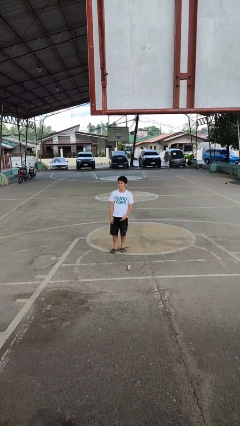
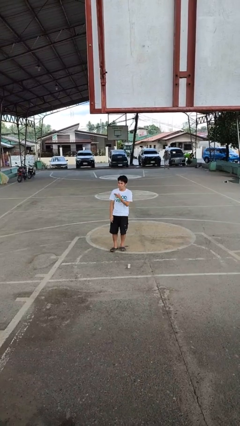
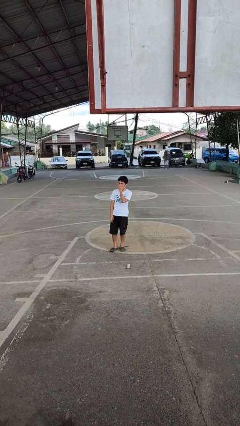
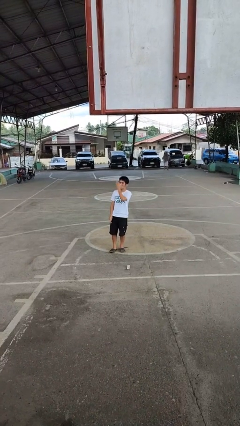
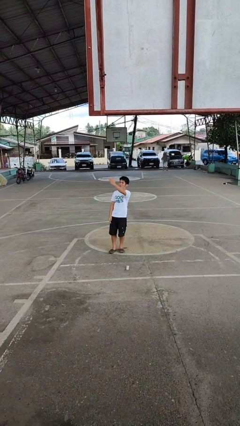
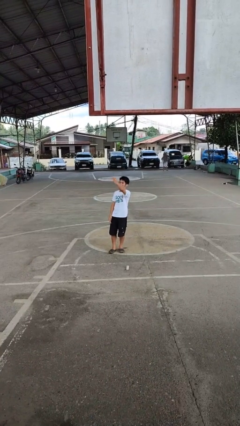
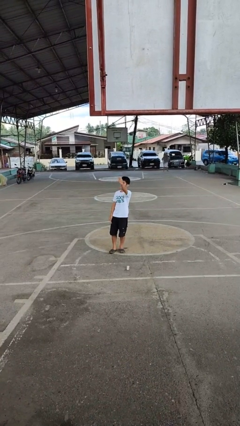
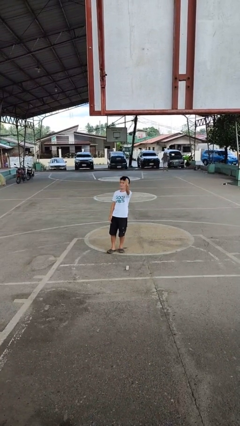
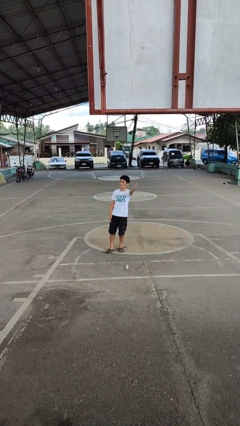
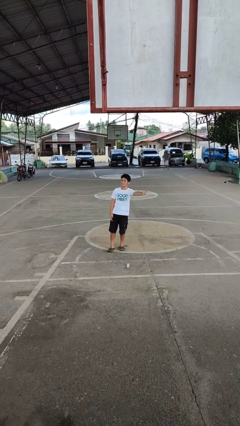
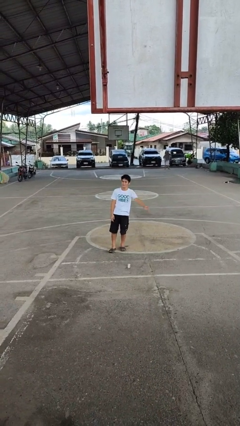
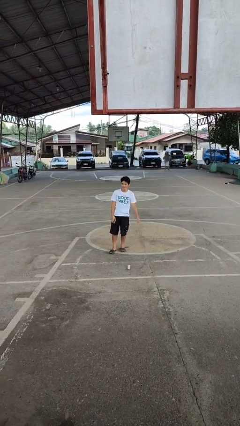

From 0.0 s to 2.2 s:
person gestures blow kiss

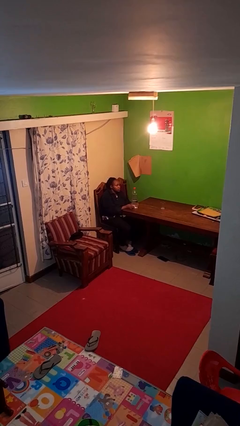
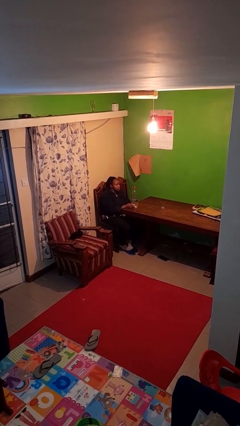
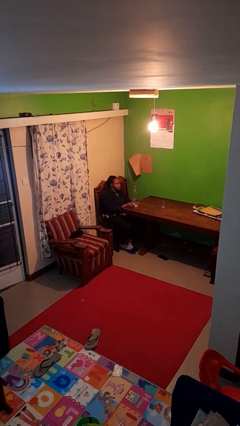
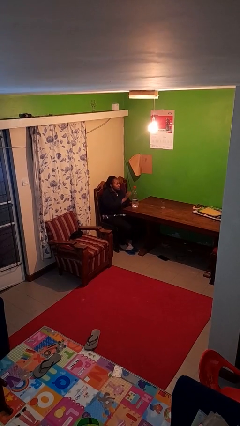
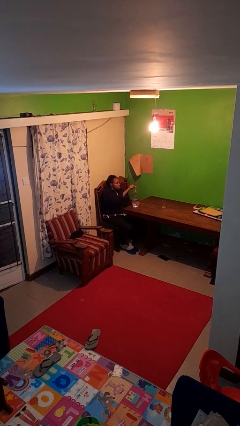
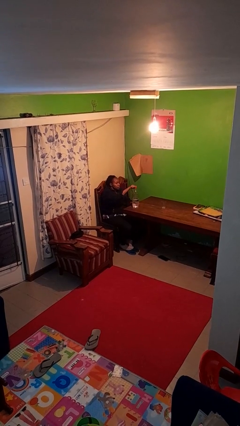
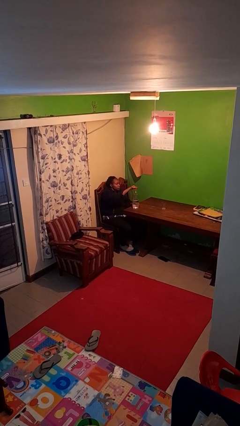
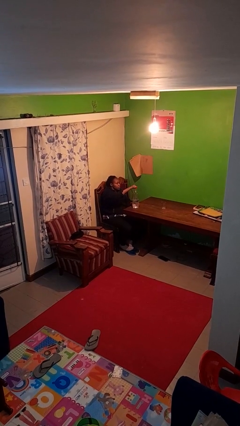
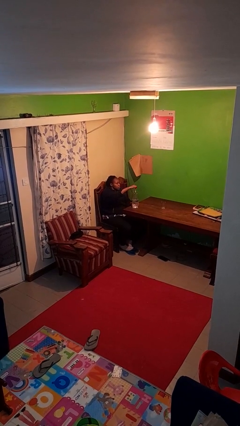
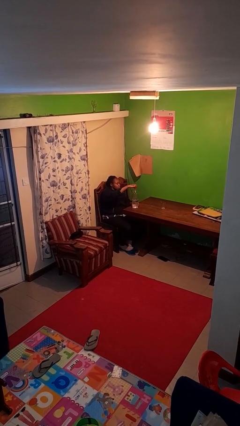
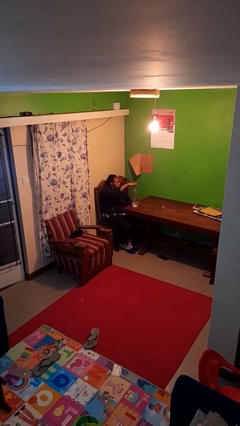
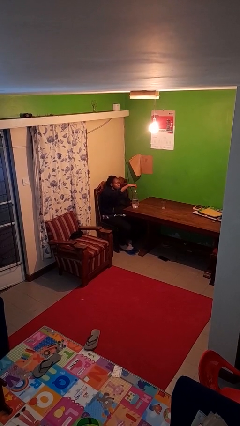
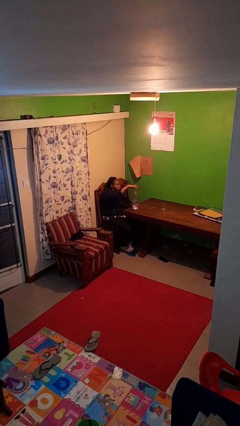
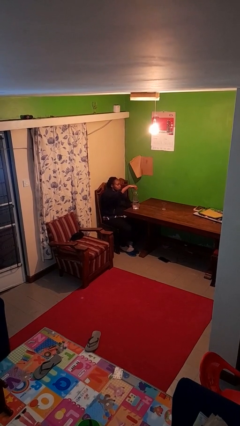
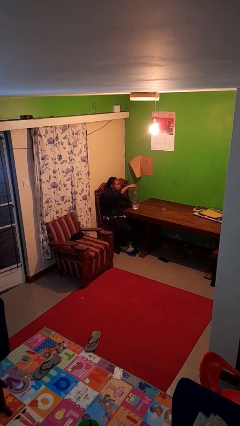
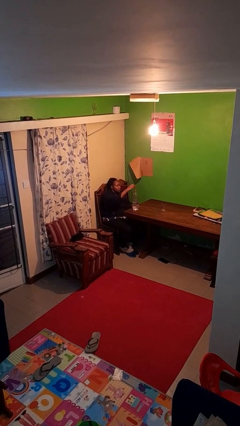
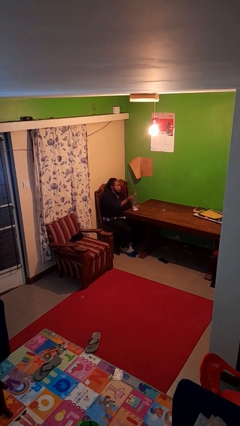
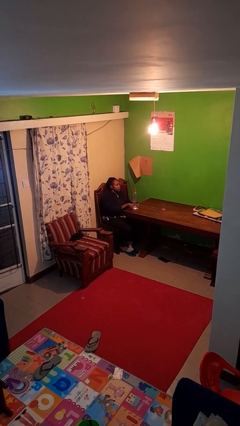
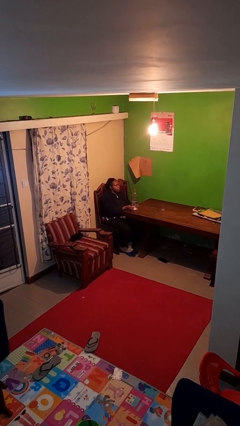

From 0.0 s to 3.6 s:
person unscrews lid from bottle

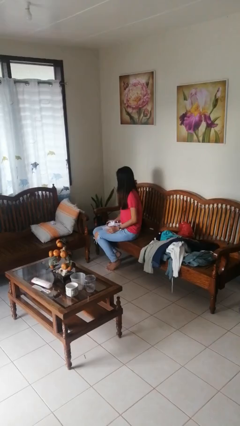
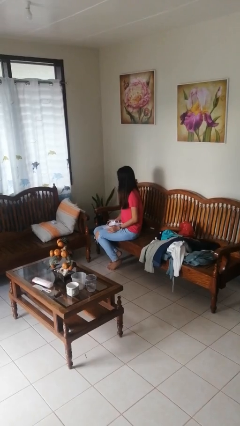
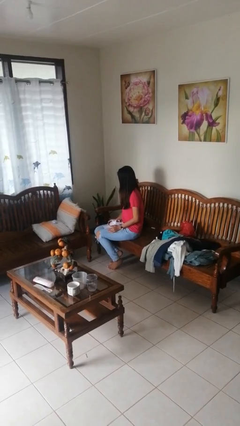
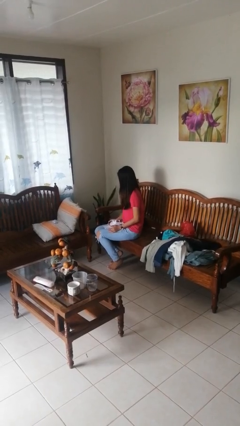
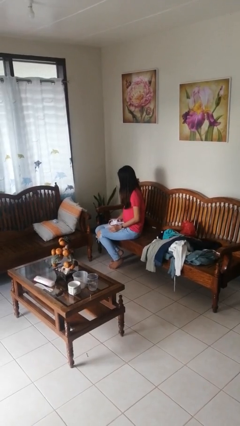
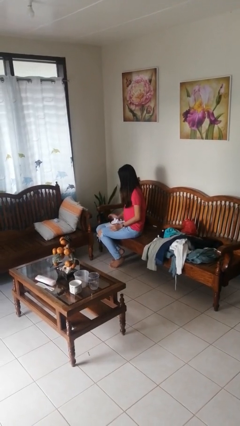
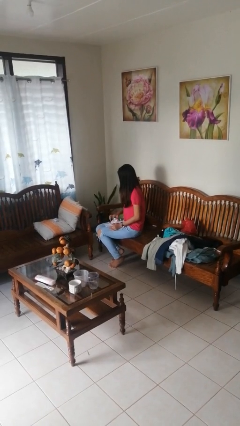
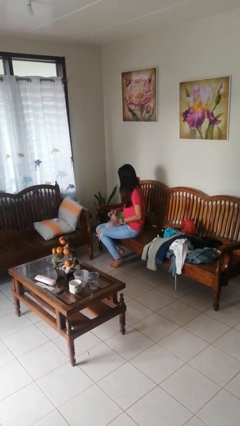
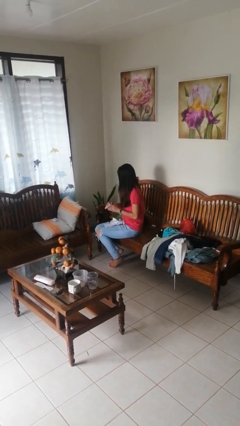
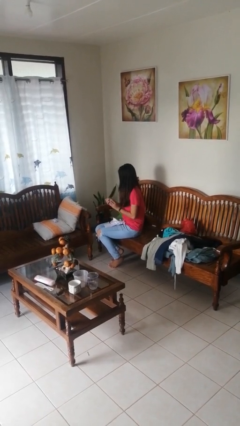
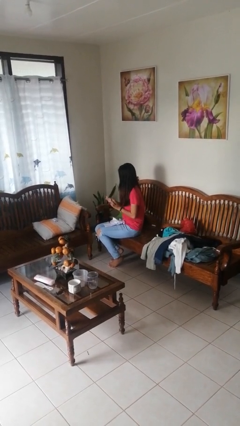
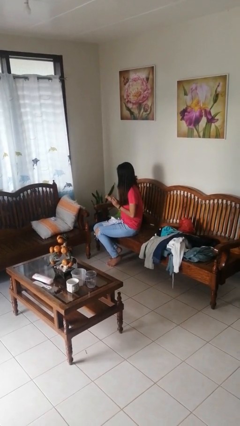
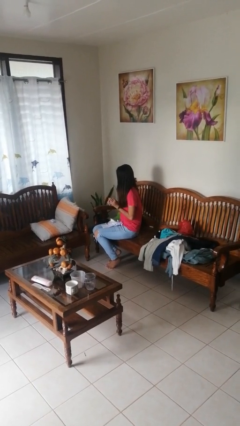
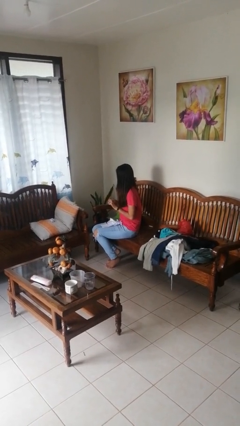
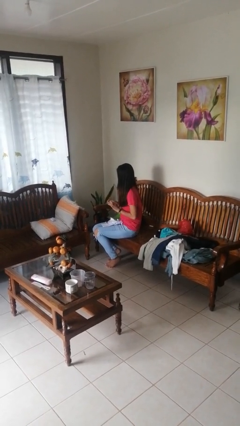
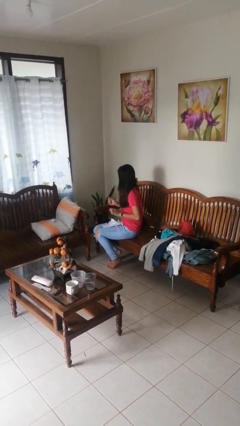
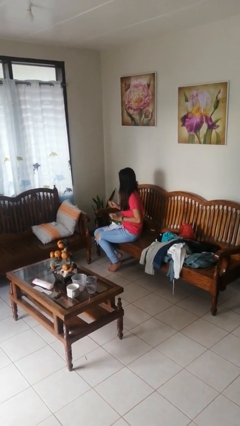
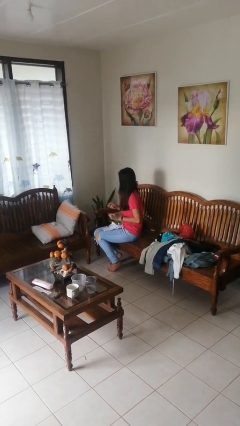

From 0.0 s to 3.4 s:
person crumples paper

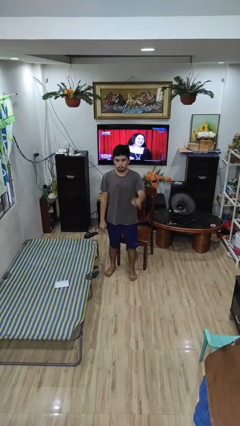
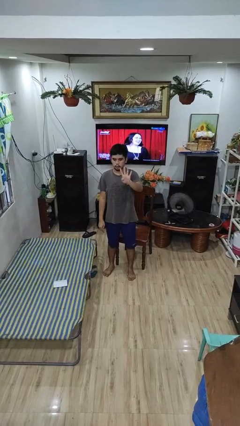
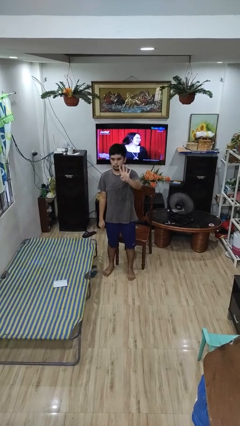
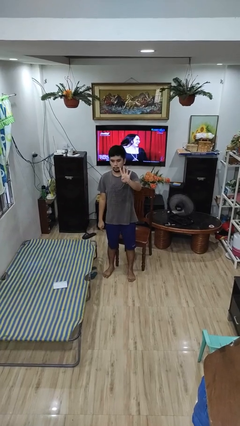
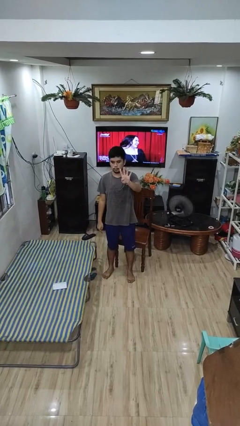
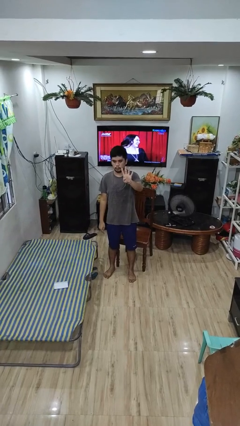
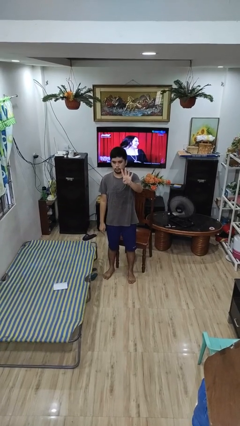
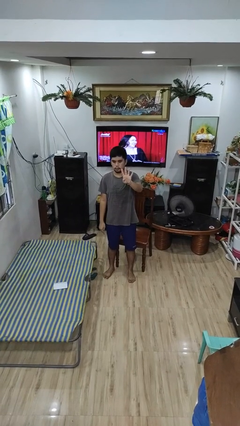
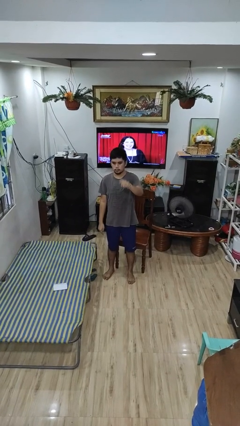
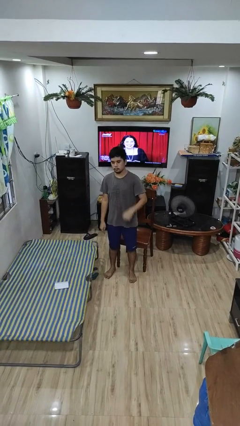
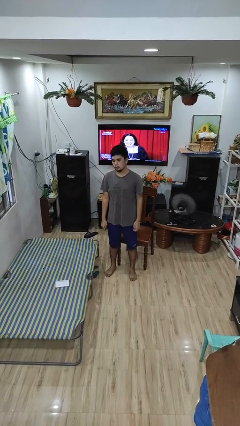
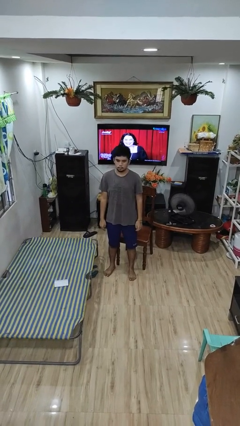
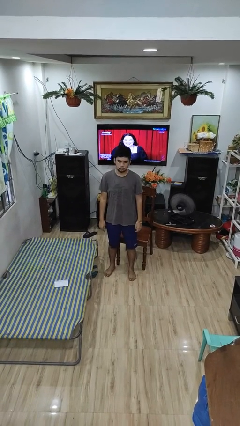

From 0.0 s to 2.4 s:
person gestures number four

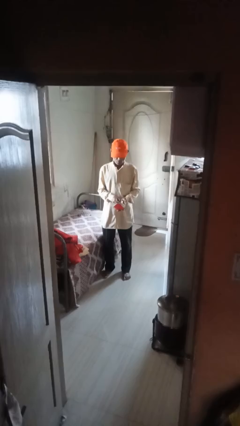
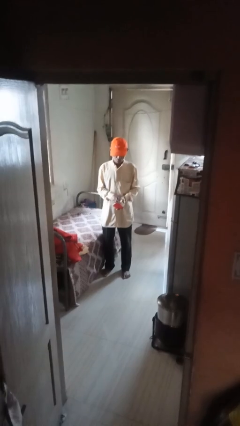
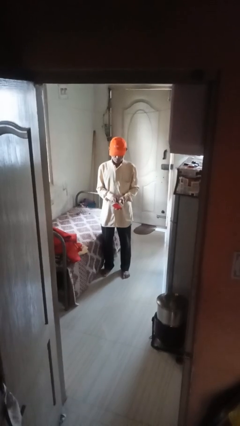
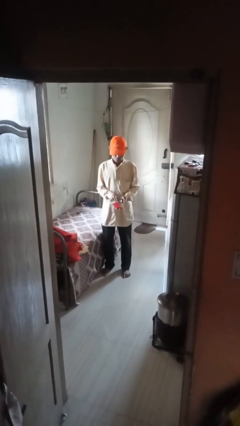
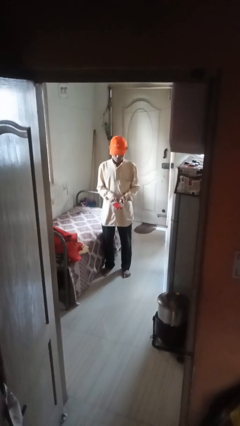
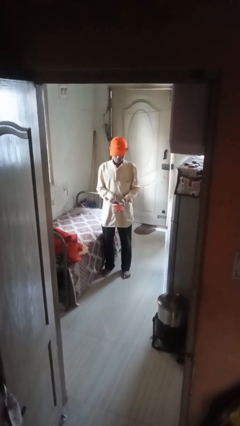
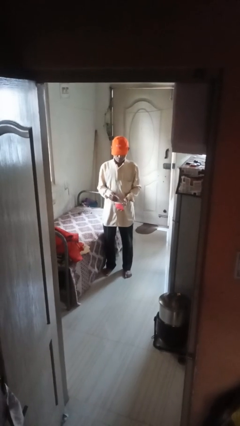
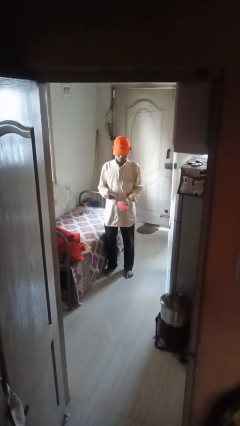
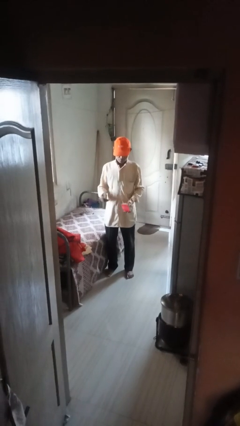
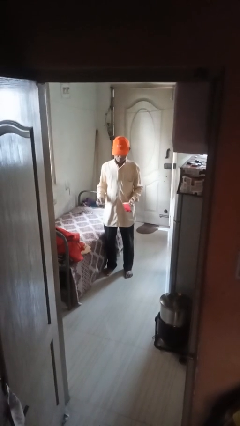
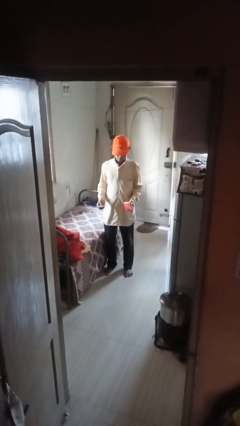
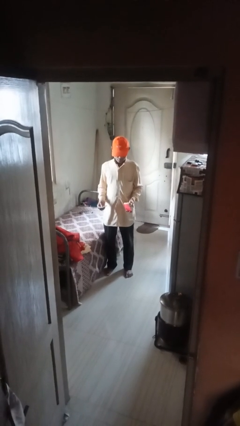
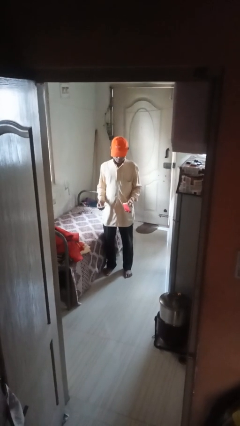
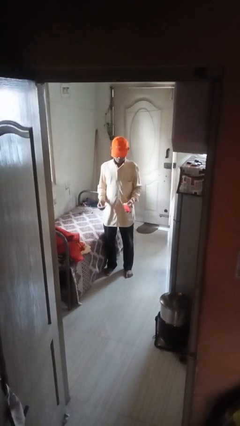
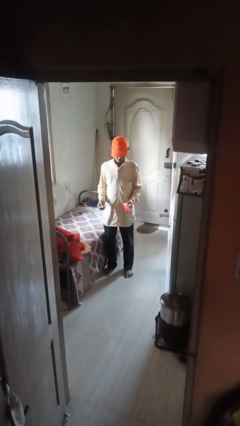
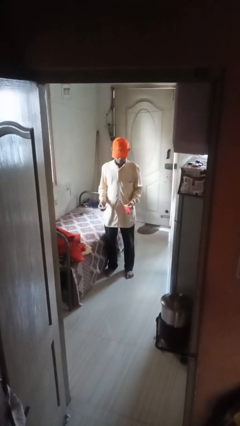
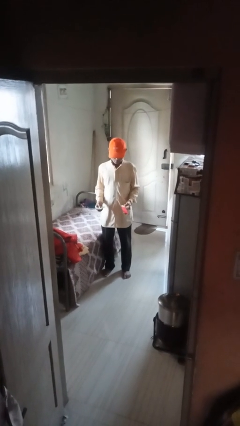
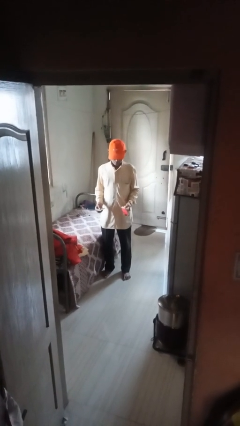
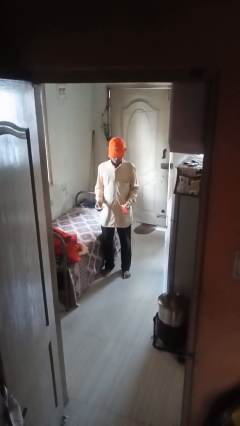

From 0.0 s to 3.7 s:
person takes object from purse

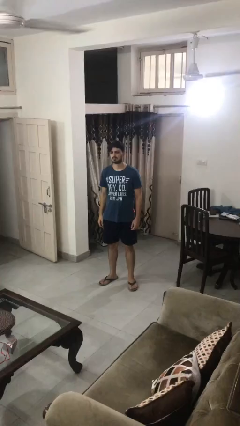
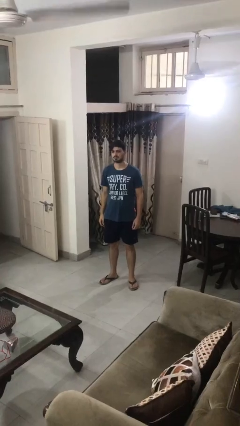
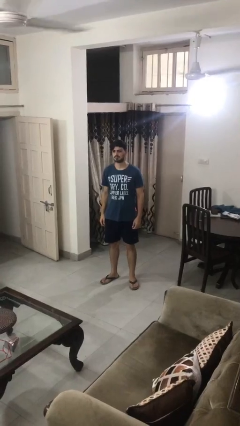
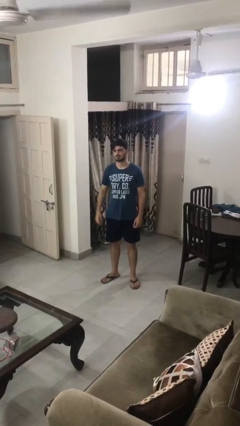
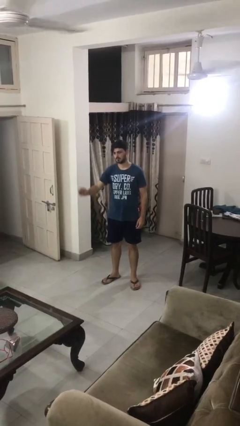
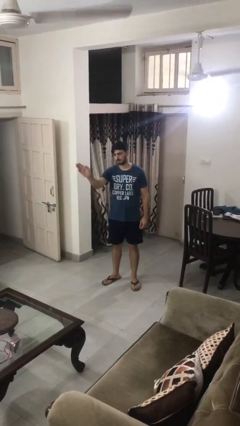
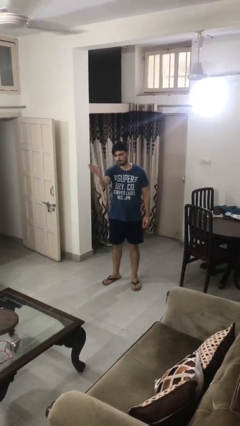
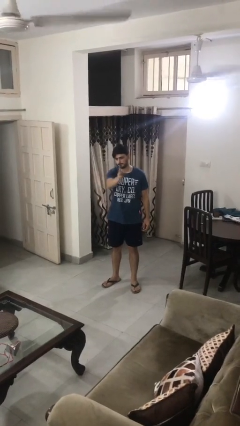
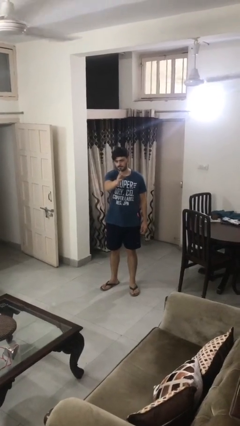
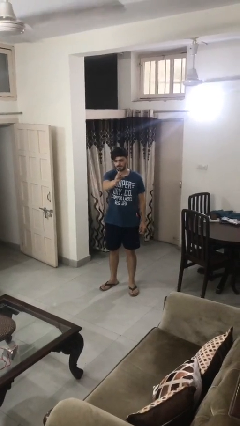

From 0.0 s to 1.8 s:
person gestures swipe left

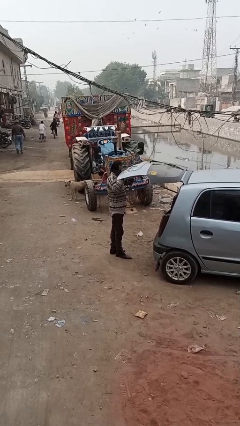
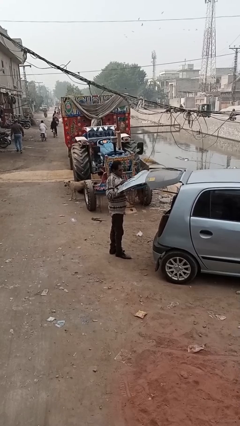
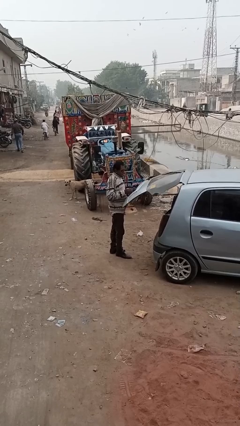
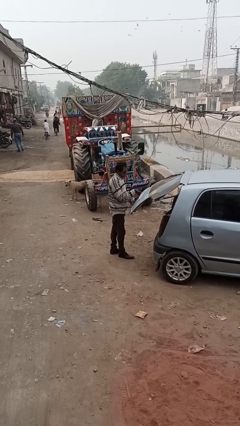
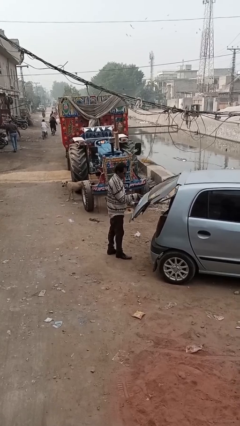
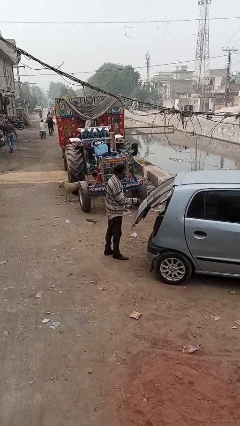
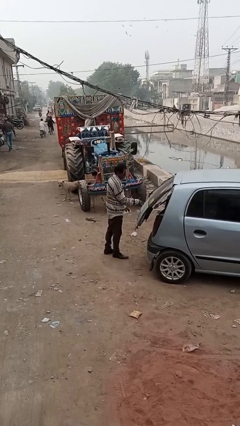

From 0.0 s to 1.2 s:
person closes car trunk
